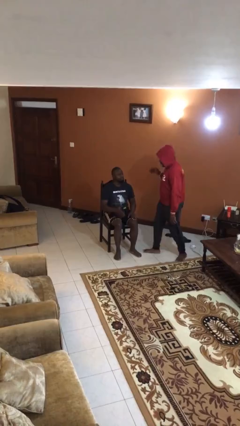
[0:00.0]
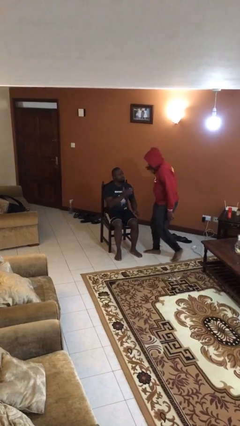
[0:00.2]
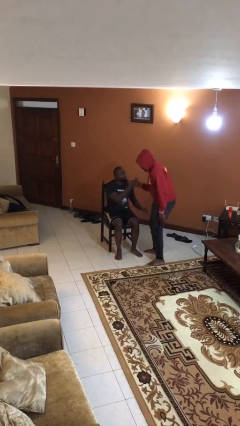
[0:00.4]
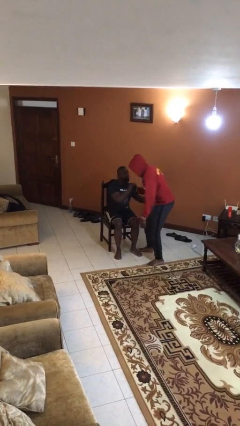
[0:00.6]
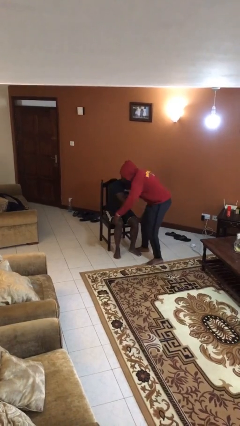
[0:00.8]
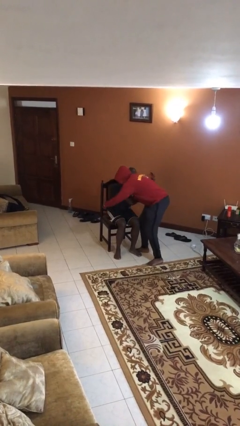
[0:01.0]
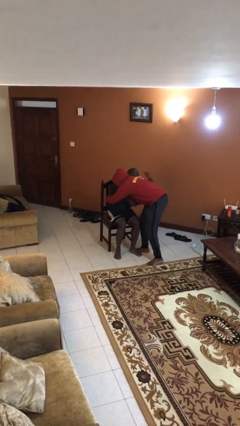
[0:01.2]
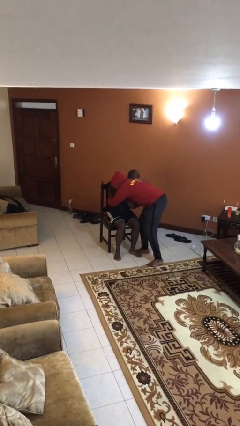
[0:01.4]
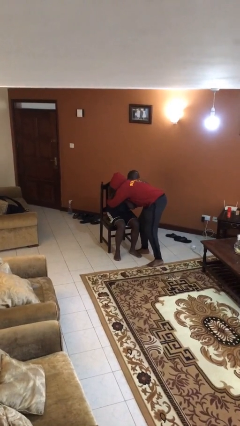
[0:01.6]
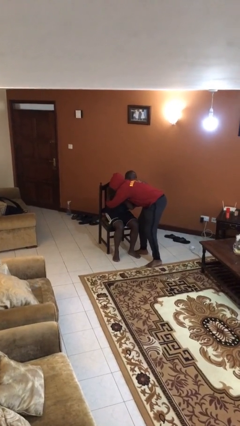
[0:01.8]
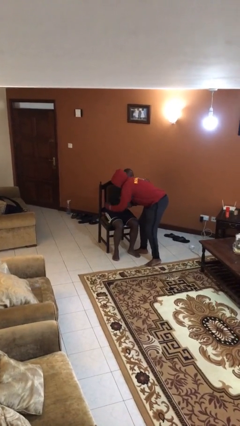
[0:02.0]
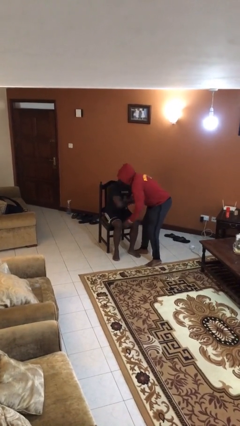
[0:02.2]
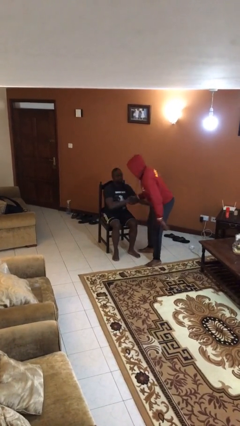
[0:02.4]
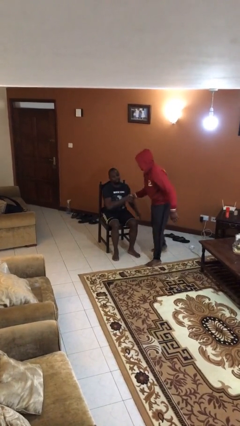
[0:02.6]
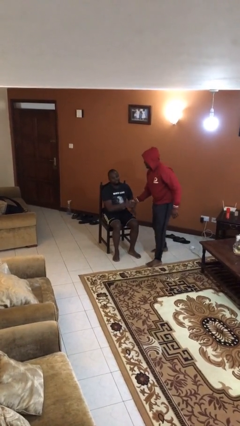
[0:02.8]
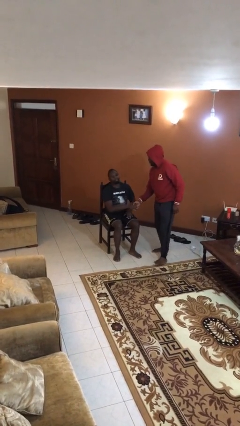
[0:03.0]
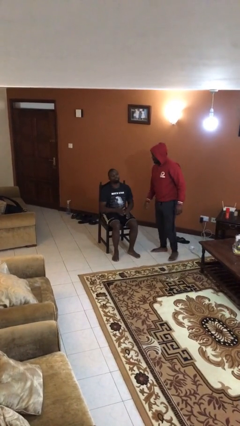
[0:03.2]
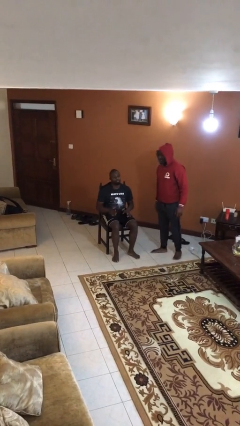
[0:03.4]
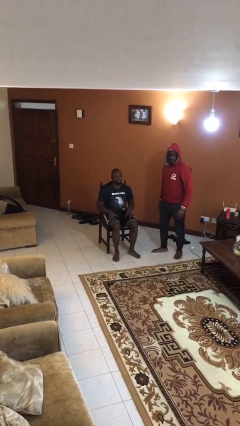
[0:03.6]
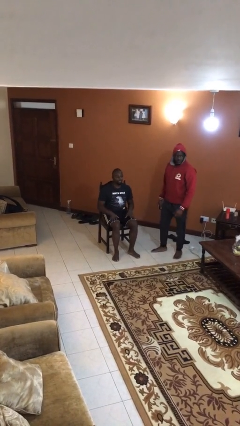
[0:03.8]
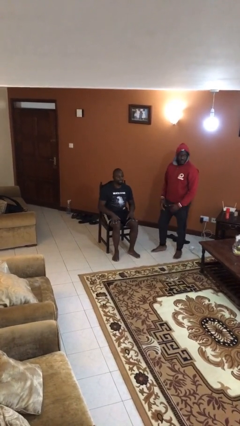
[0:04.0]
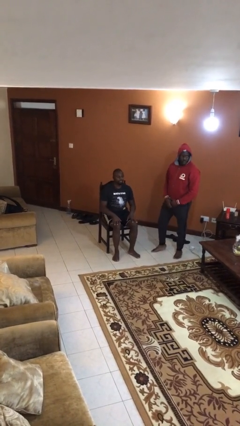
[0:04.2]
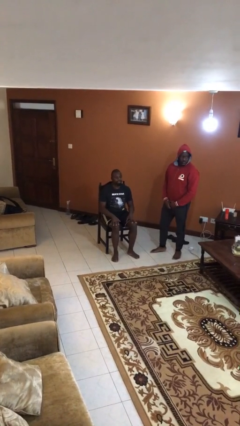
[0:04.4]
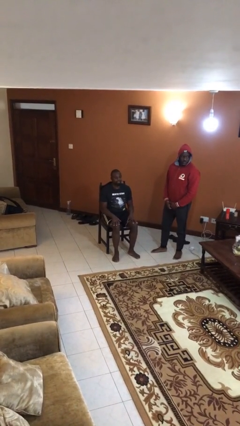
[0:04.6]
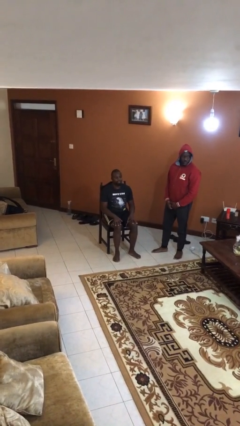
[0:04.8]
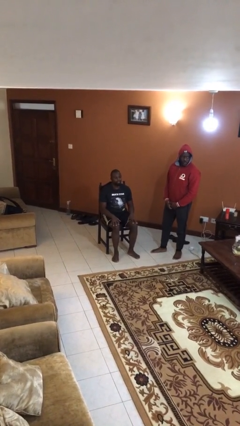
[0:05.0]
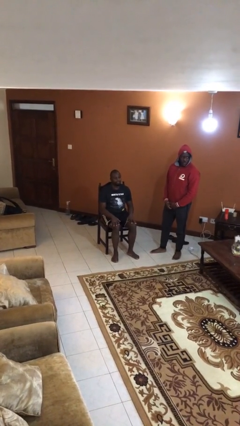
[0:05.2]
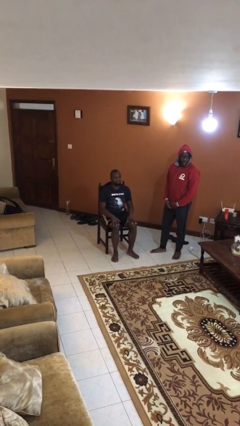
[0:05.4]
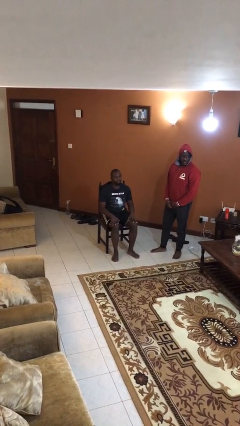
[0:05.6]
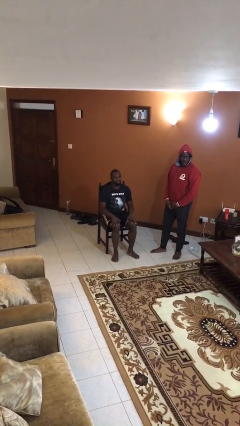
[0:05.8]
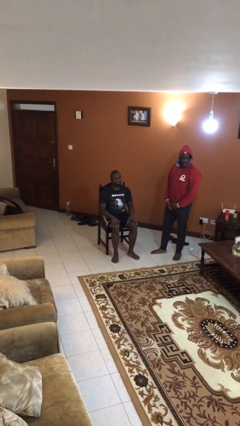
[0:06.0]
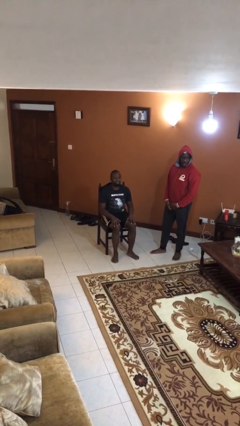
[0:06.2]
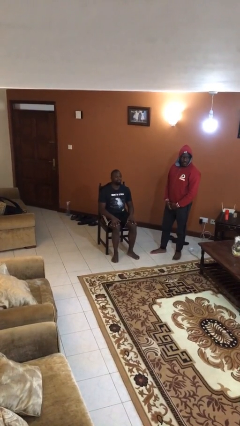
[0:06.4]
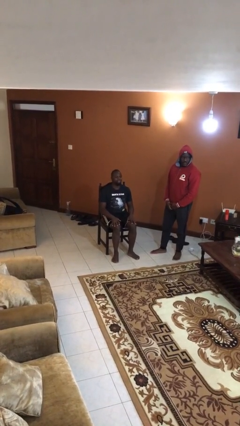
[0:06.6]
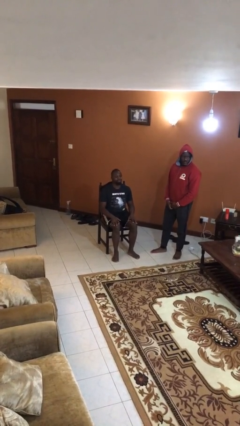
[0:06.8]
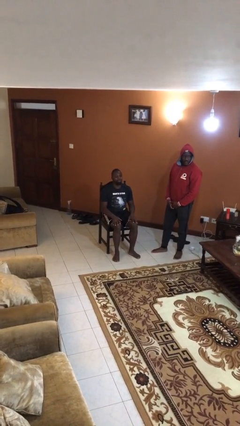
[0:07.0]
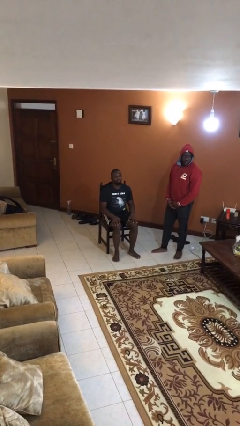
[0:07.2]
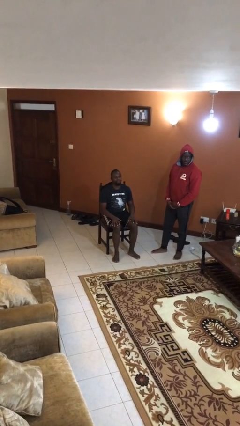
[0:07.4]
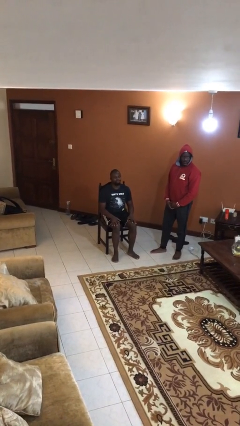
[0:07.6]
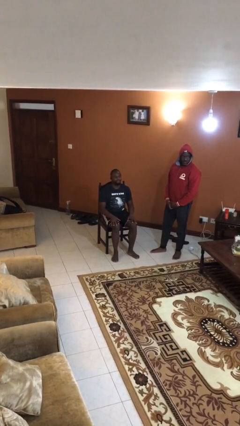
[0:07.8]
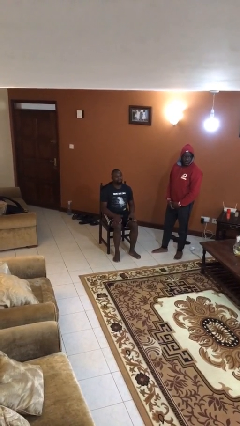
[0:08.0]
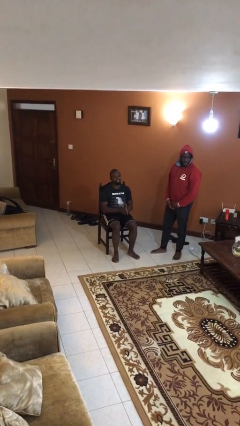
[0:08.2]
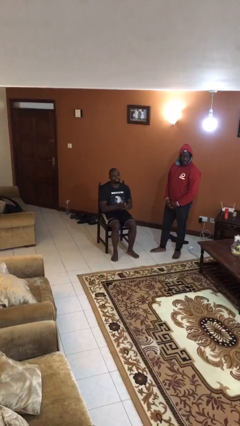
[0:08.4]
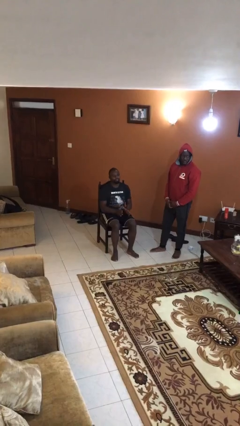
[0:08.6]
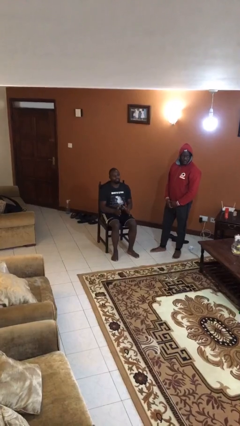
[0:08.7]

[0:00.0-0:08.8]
person embraces person

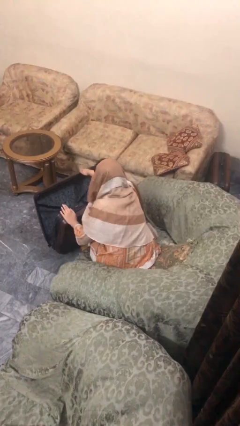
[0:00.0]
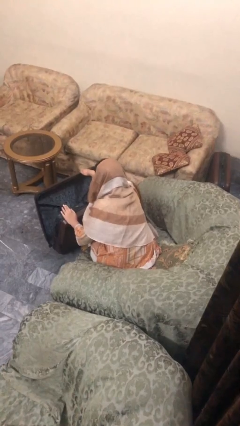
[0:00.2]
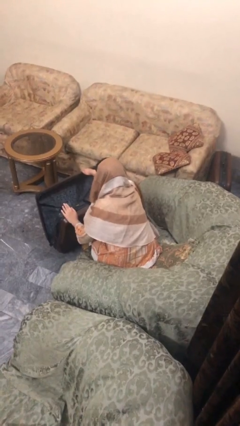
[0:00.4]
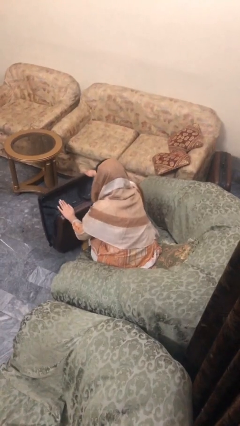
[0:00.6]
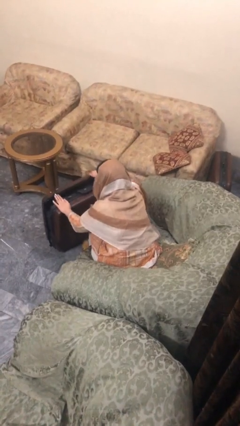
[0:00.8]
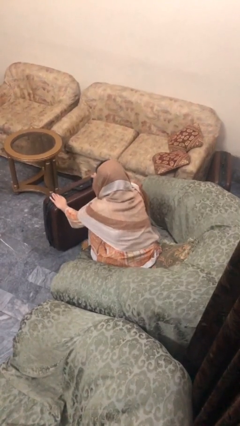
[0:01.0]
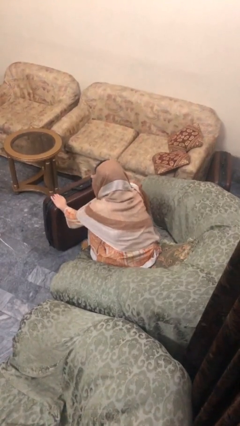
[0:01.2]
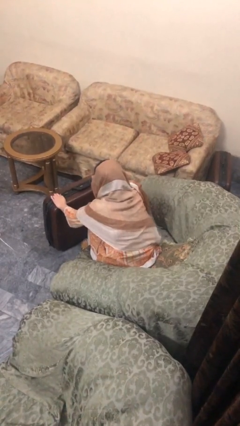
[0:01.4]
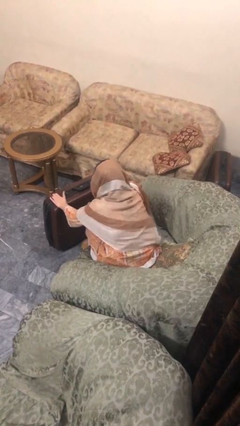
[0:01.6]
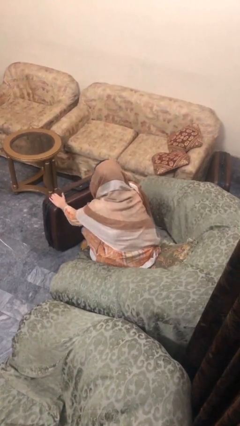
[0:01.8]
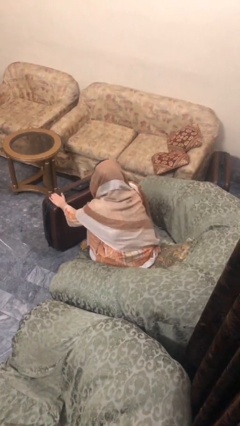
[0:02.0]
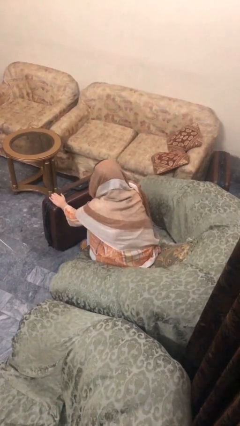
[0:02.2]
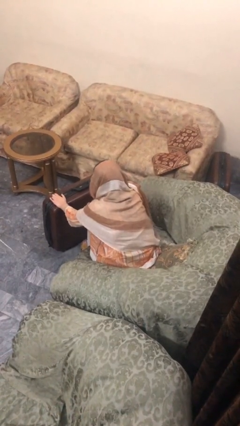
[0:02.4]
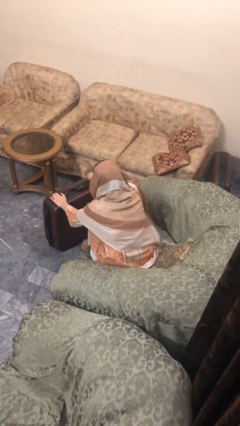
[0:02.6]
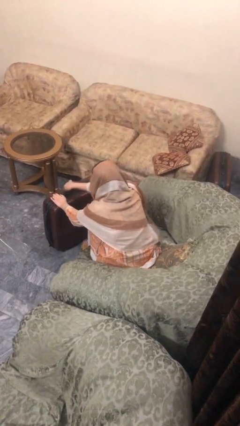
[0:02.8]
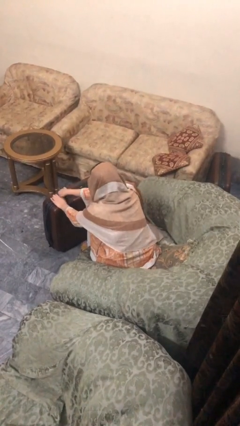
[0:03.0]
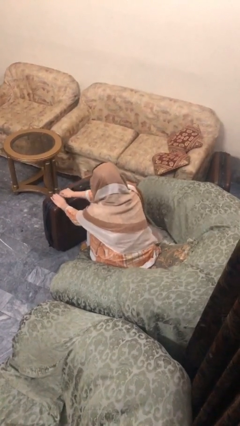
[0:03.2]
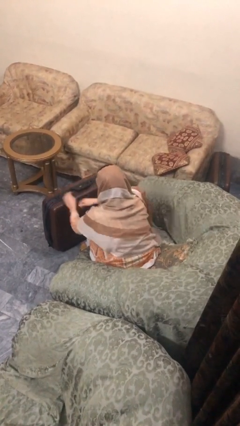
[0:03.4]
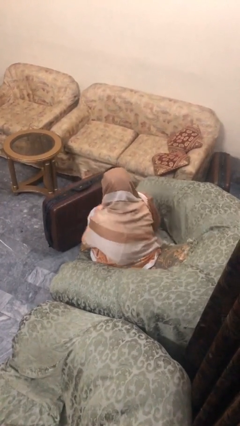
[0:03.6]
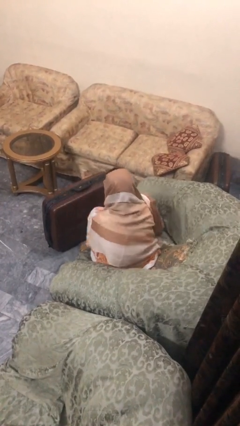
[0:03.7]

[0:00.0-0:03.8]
person closes suitcase

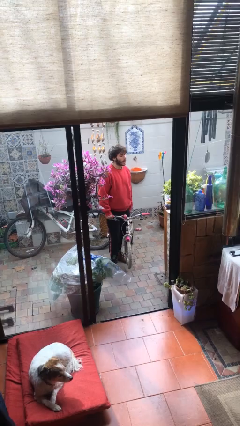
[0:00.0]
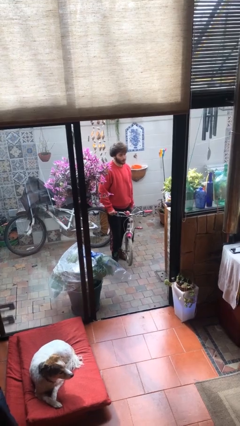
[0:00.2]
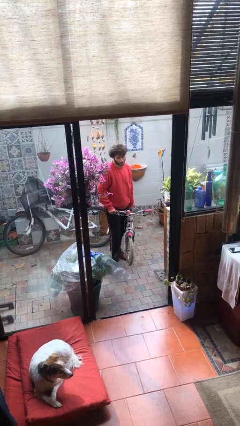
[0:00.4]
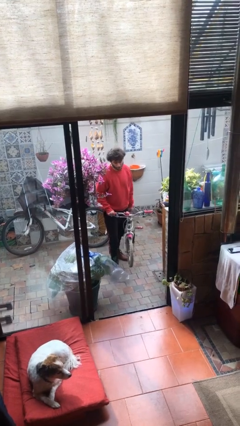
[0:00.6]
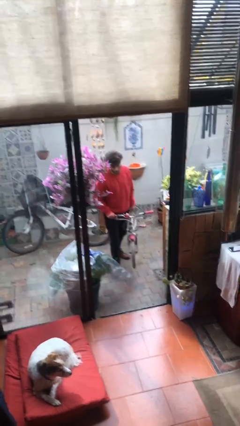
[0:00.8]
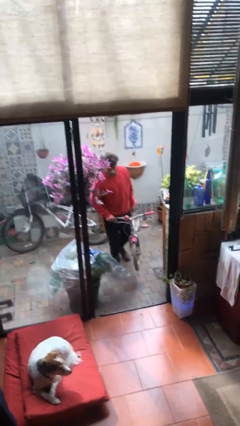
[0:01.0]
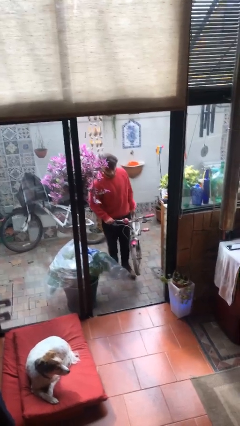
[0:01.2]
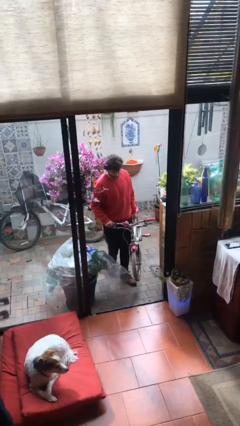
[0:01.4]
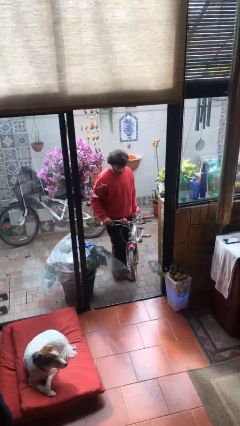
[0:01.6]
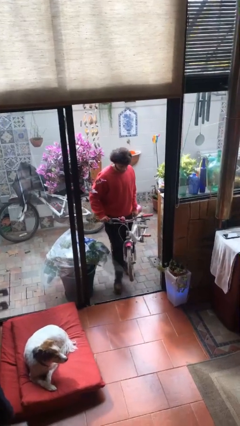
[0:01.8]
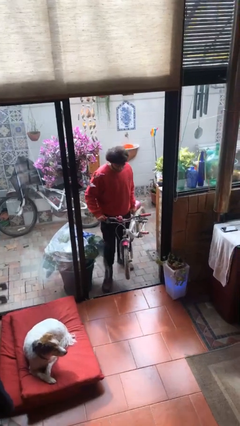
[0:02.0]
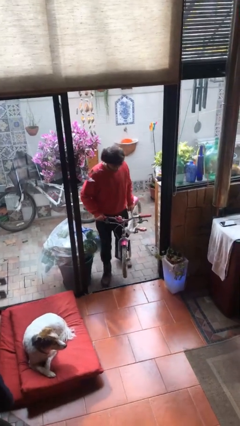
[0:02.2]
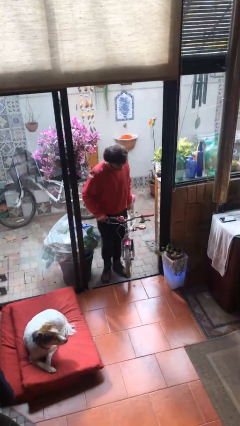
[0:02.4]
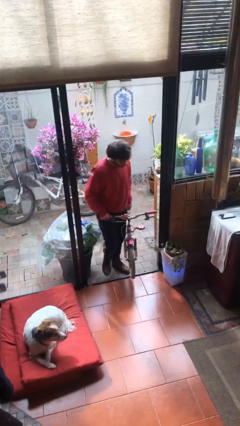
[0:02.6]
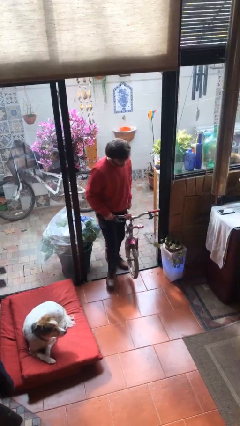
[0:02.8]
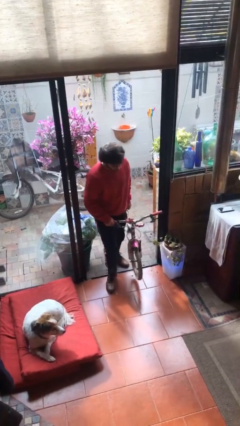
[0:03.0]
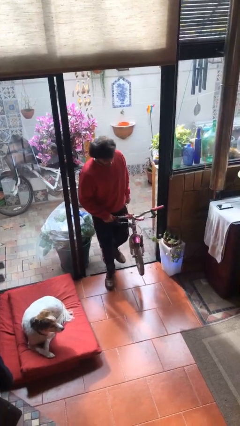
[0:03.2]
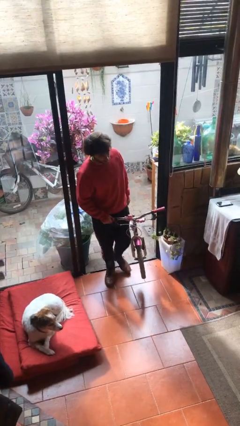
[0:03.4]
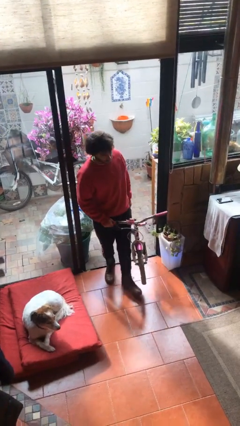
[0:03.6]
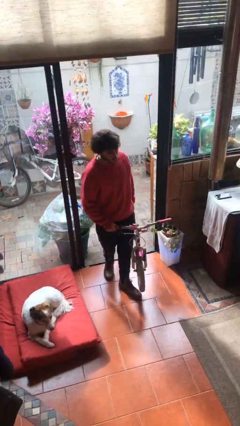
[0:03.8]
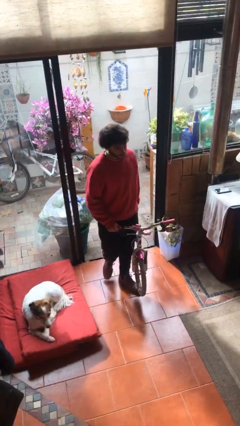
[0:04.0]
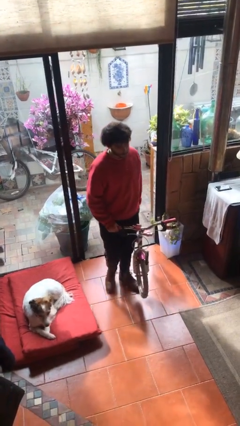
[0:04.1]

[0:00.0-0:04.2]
person carries bicycle

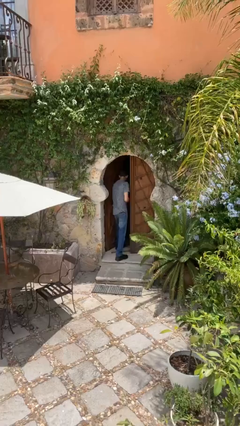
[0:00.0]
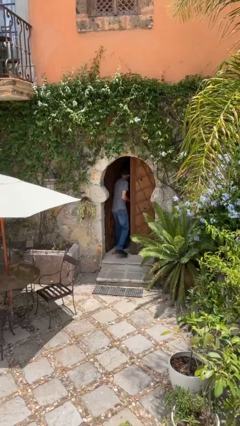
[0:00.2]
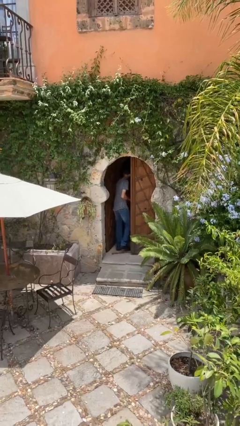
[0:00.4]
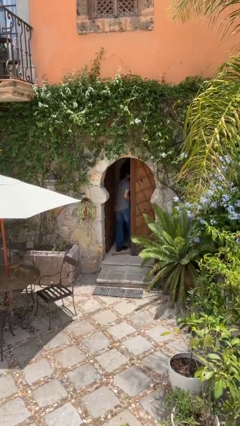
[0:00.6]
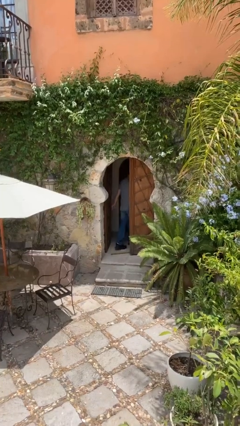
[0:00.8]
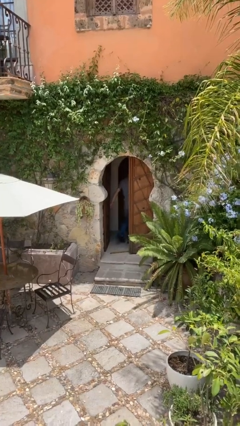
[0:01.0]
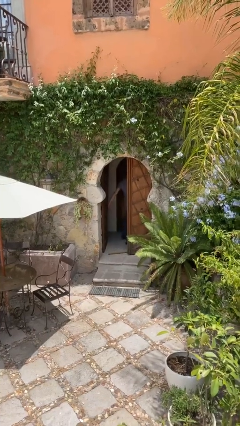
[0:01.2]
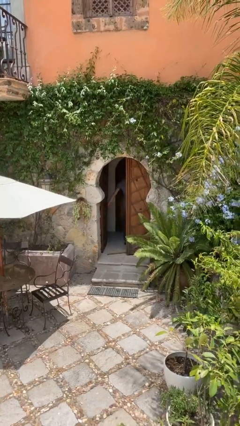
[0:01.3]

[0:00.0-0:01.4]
person exits scene through structure
